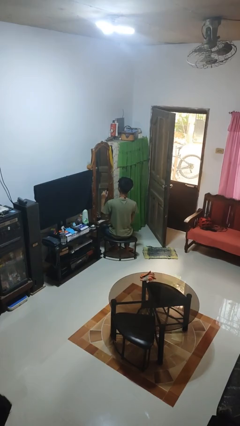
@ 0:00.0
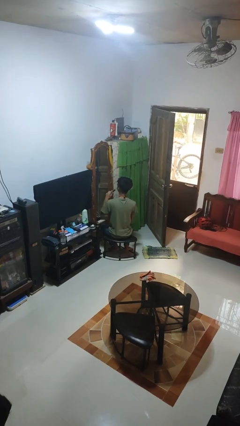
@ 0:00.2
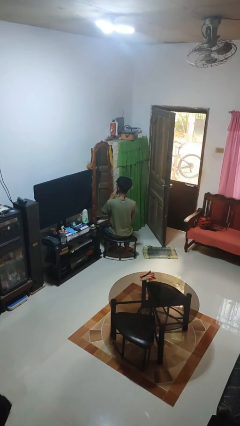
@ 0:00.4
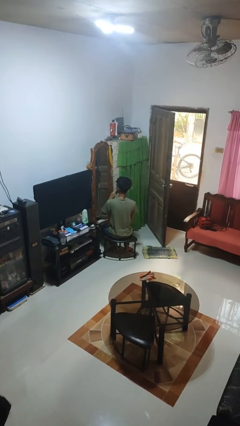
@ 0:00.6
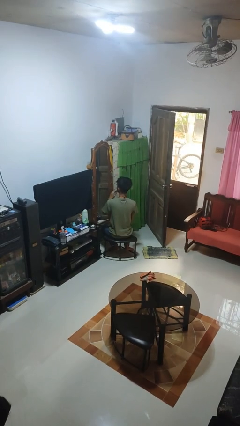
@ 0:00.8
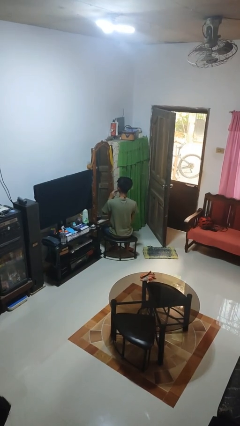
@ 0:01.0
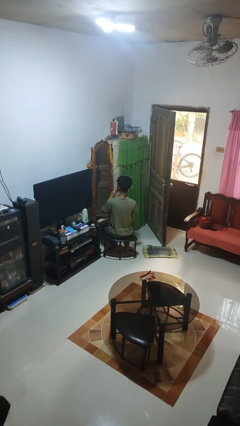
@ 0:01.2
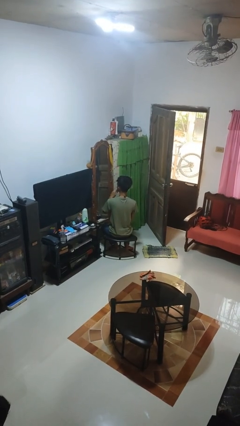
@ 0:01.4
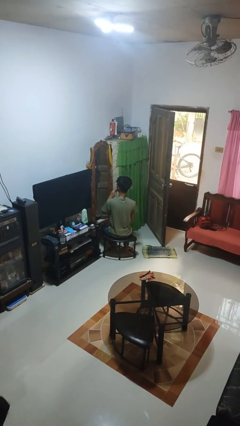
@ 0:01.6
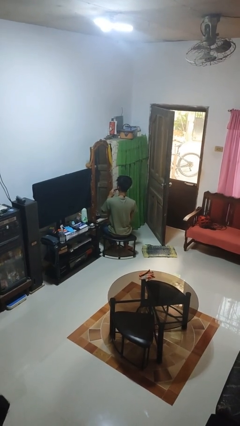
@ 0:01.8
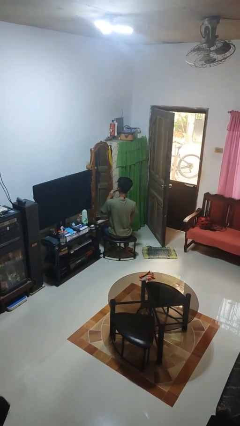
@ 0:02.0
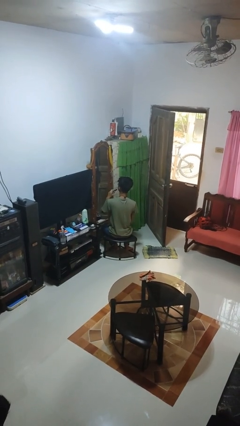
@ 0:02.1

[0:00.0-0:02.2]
person applies lip makeup

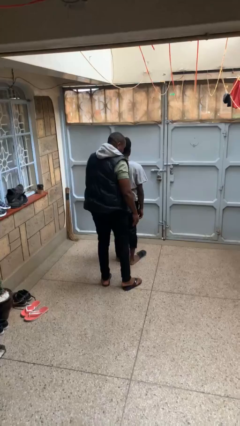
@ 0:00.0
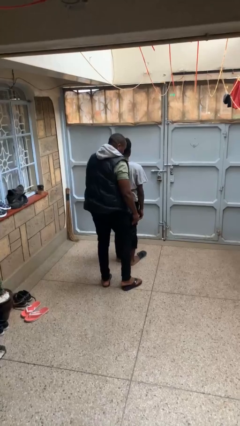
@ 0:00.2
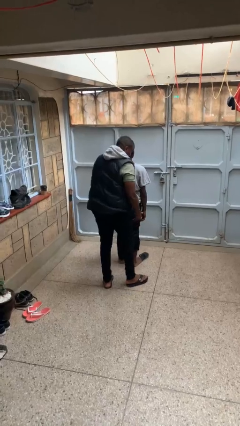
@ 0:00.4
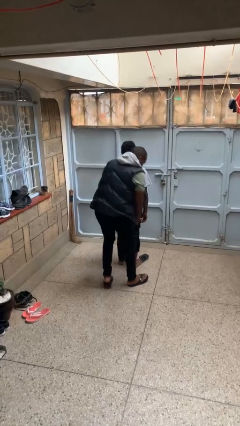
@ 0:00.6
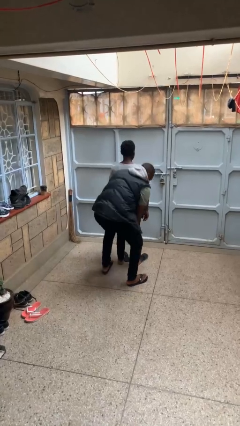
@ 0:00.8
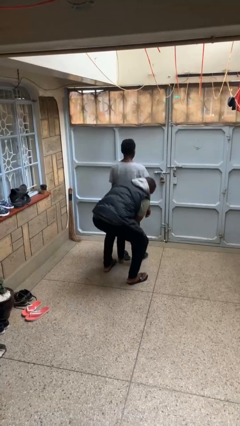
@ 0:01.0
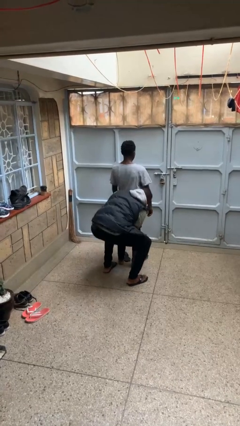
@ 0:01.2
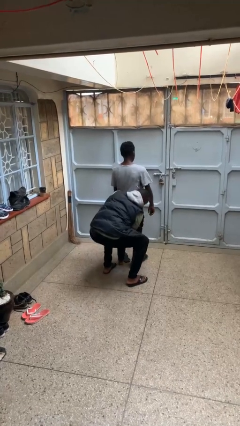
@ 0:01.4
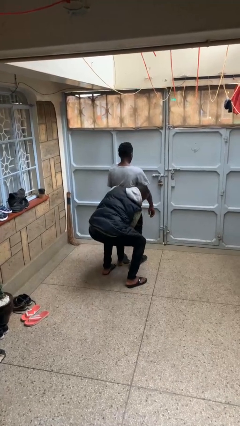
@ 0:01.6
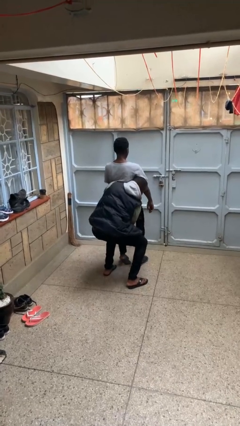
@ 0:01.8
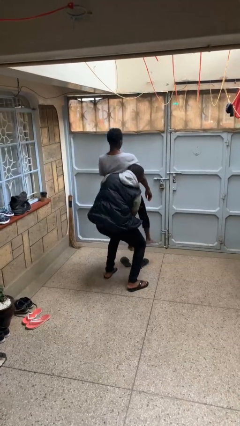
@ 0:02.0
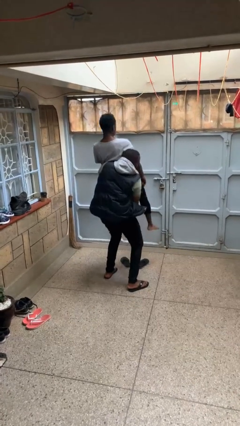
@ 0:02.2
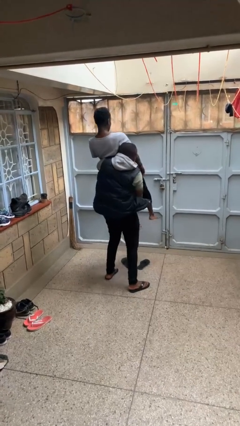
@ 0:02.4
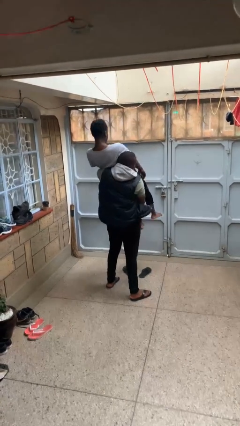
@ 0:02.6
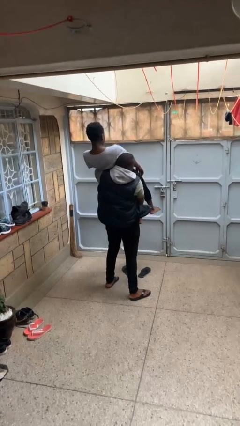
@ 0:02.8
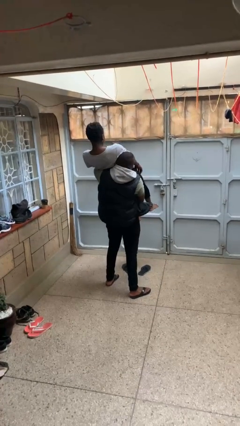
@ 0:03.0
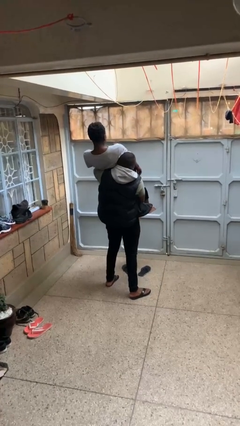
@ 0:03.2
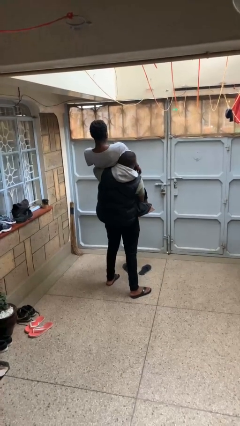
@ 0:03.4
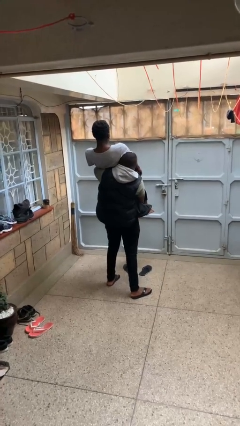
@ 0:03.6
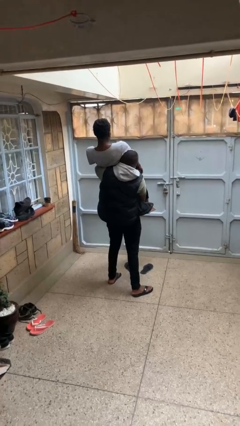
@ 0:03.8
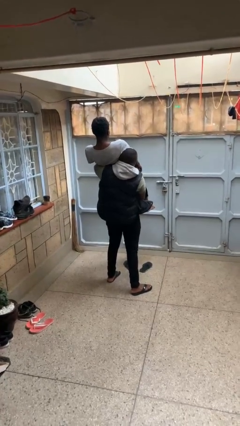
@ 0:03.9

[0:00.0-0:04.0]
person carries person over shoulder

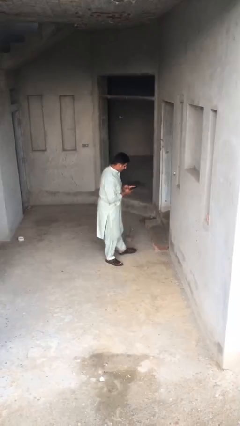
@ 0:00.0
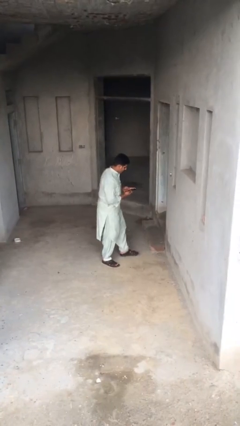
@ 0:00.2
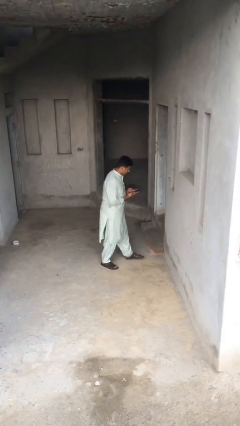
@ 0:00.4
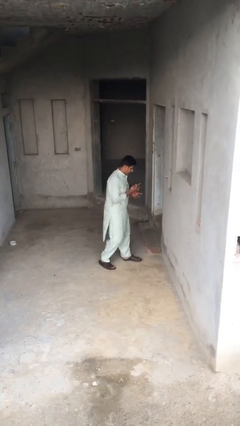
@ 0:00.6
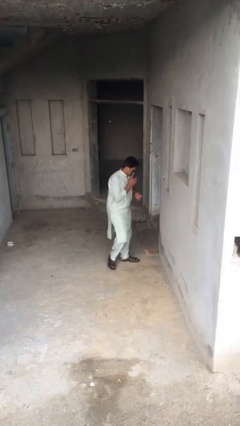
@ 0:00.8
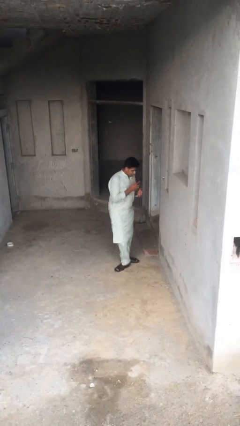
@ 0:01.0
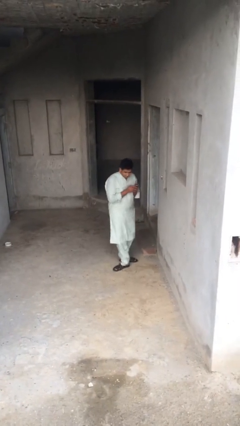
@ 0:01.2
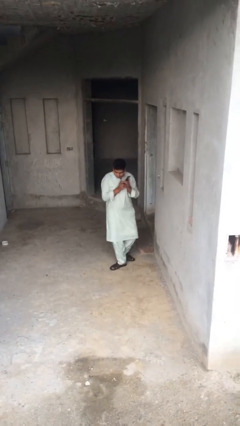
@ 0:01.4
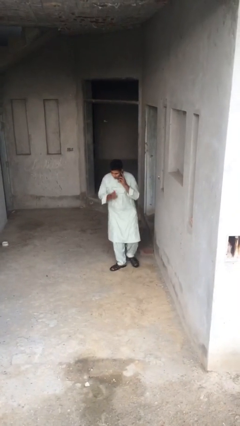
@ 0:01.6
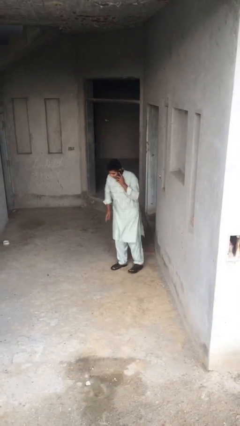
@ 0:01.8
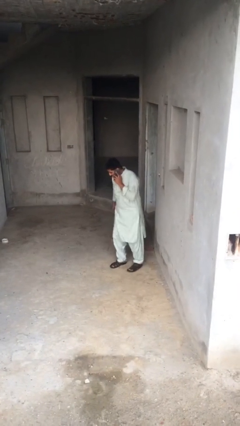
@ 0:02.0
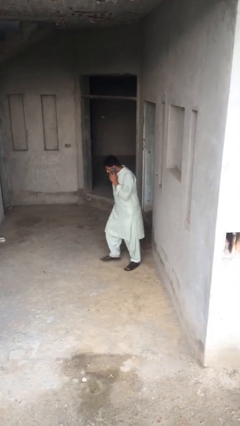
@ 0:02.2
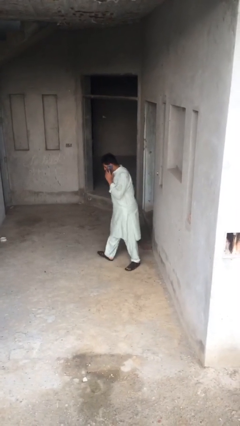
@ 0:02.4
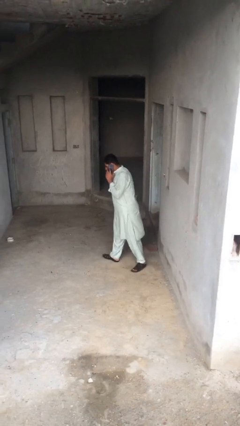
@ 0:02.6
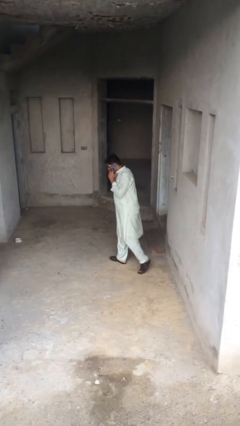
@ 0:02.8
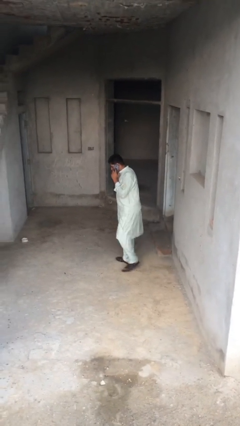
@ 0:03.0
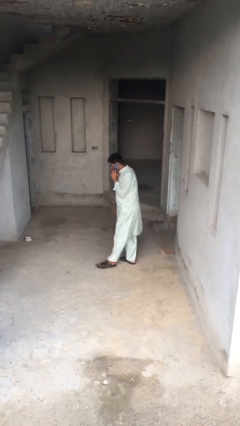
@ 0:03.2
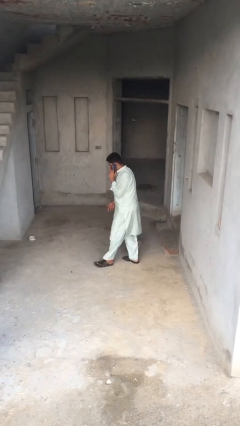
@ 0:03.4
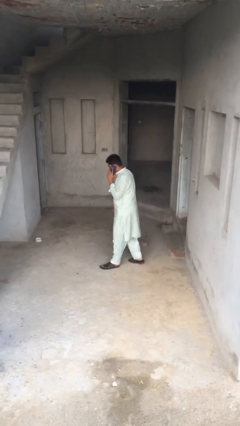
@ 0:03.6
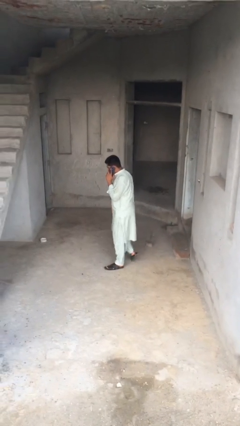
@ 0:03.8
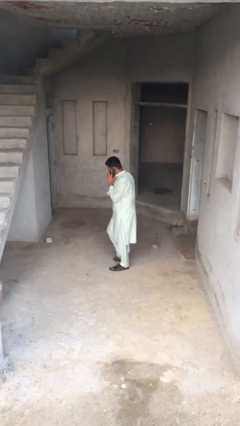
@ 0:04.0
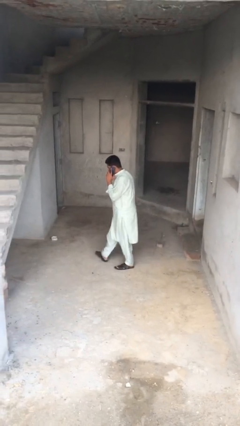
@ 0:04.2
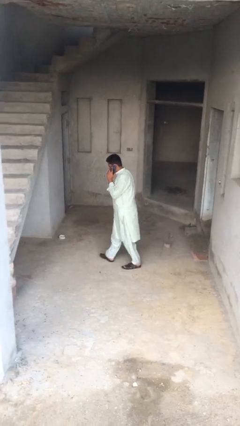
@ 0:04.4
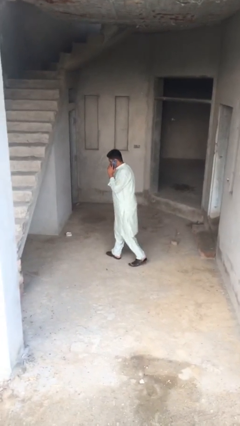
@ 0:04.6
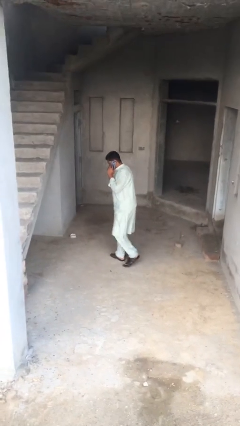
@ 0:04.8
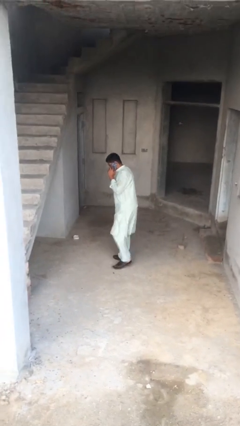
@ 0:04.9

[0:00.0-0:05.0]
person talks on phone

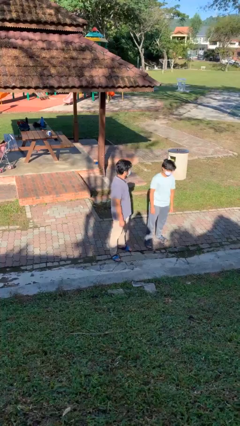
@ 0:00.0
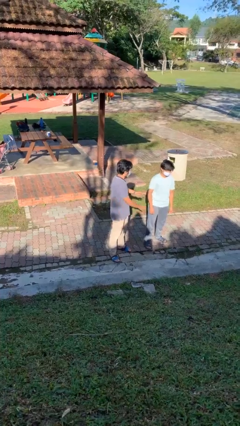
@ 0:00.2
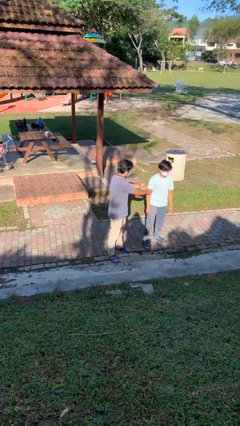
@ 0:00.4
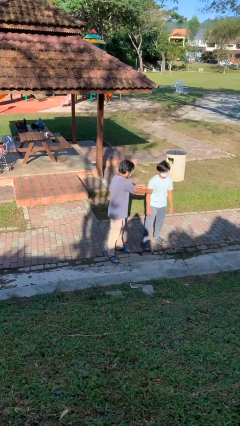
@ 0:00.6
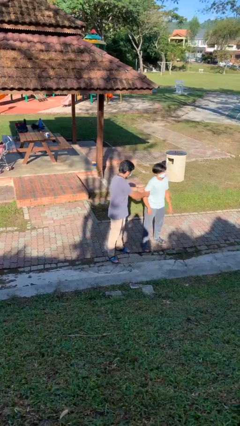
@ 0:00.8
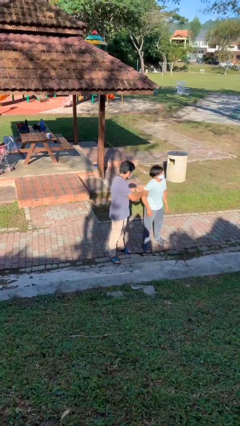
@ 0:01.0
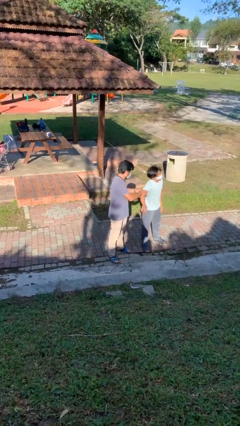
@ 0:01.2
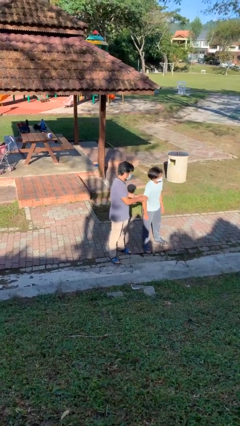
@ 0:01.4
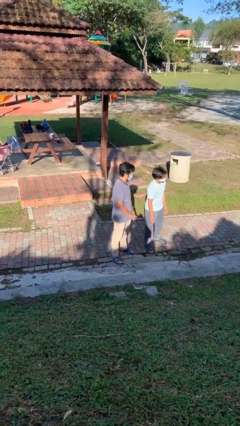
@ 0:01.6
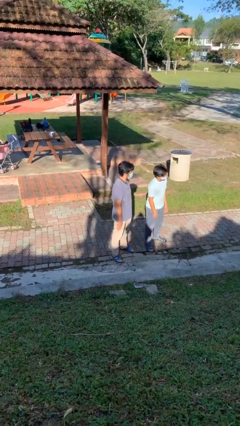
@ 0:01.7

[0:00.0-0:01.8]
person grabs person by bicep

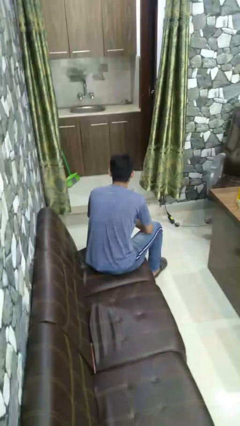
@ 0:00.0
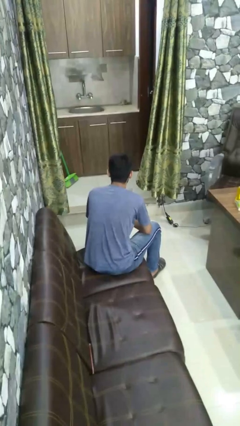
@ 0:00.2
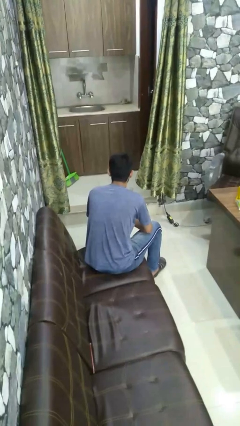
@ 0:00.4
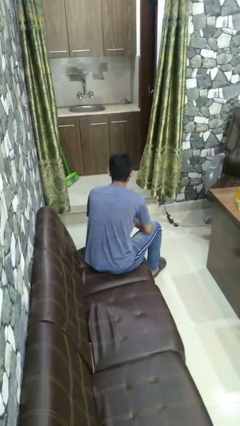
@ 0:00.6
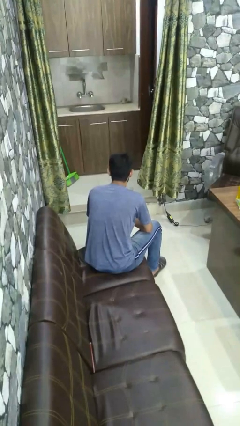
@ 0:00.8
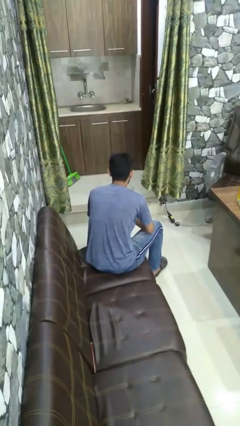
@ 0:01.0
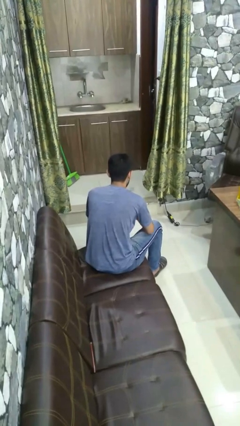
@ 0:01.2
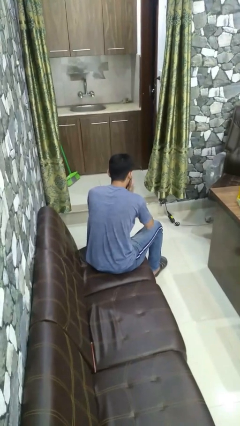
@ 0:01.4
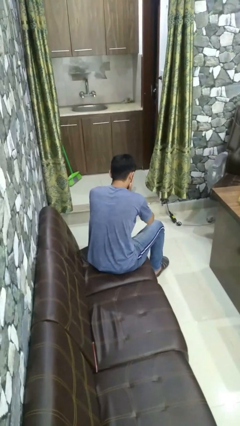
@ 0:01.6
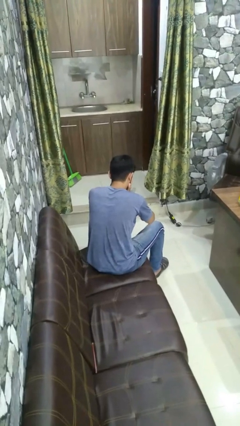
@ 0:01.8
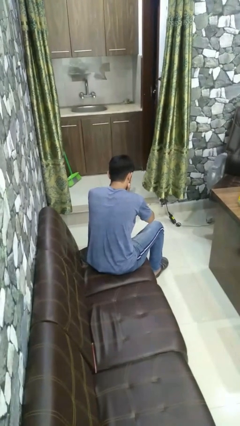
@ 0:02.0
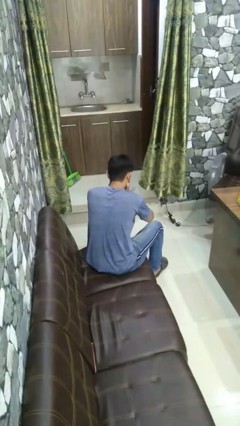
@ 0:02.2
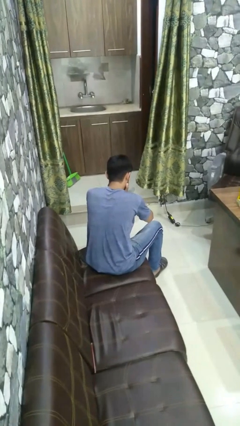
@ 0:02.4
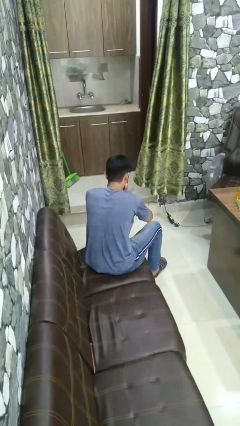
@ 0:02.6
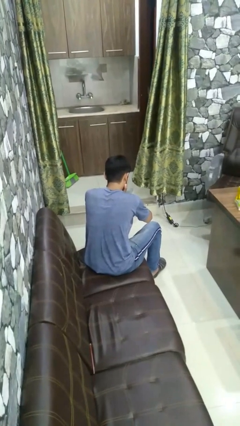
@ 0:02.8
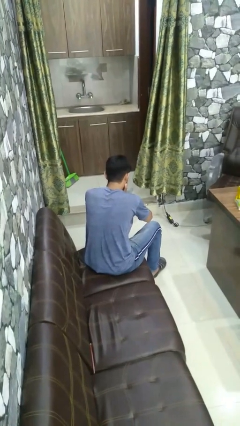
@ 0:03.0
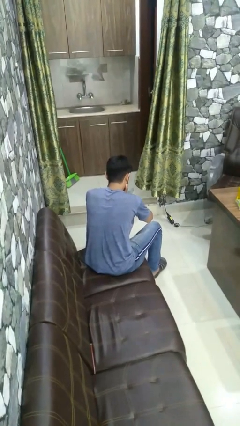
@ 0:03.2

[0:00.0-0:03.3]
person covers face with hands

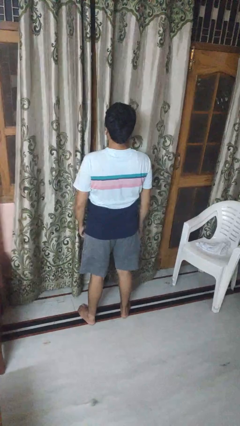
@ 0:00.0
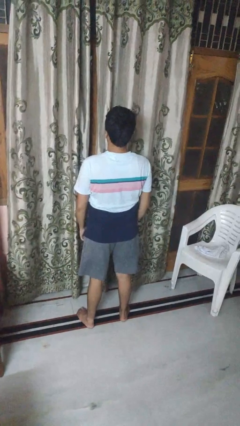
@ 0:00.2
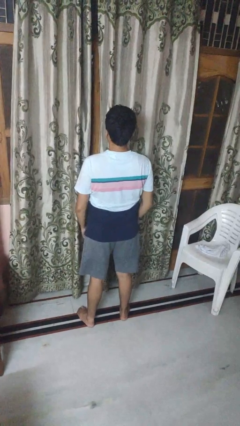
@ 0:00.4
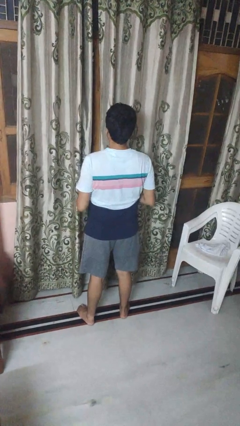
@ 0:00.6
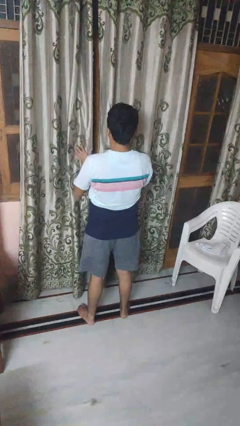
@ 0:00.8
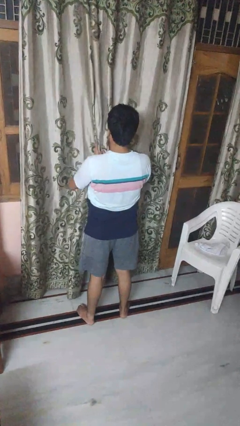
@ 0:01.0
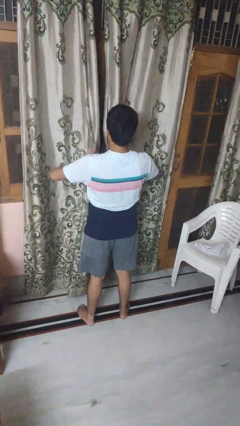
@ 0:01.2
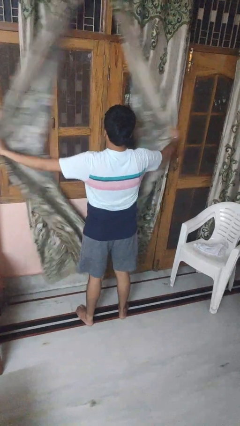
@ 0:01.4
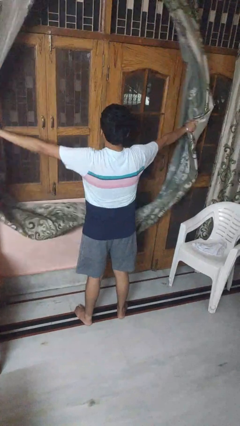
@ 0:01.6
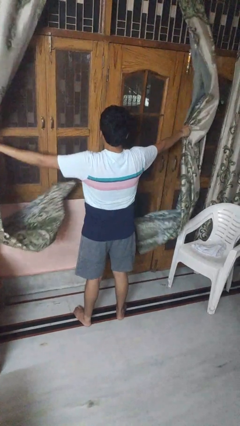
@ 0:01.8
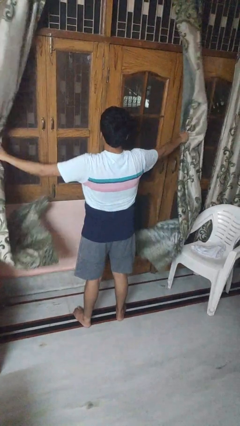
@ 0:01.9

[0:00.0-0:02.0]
person opens curtains
